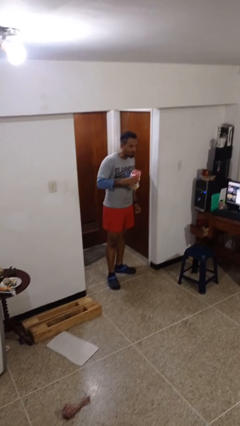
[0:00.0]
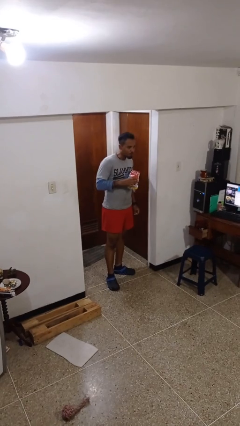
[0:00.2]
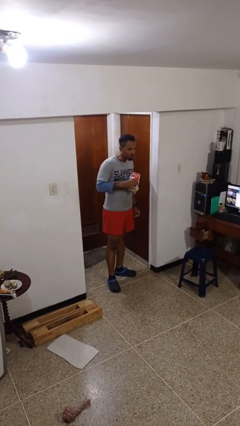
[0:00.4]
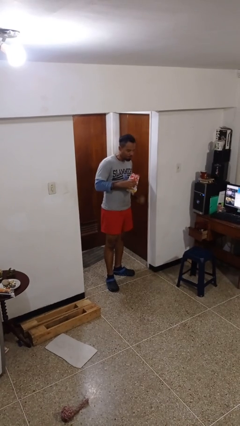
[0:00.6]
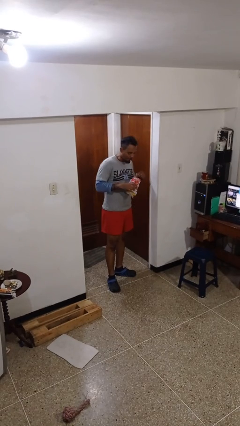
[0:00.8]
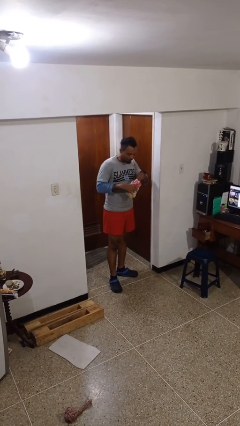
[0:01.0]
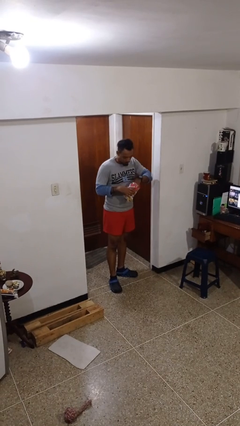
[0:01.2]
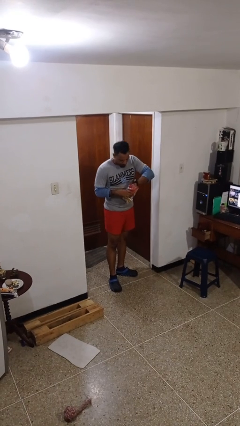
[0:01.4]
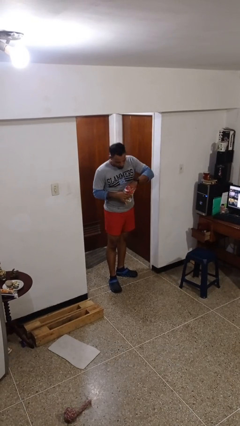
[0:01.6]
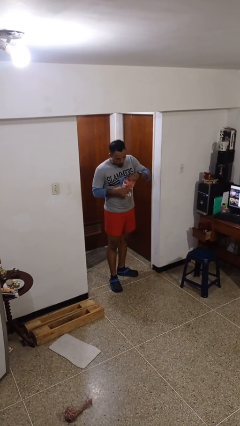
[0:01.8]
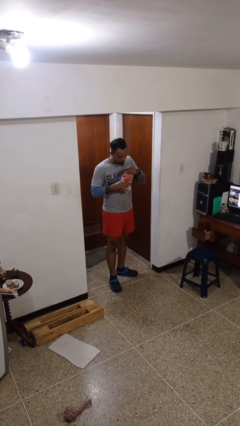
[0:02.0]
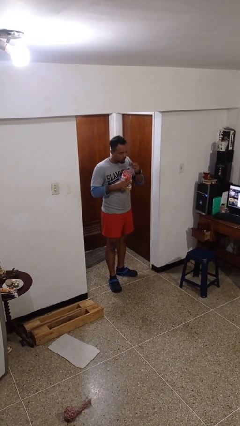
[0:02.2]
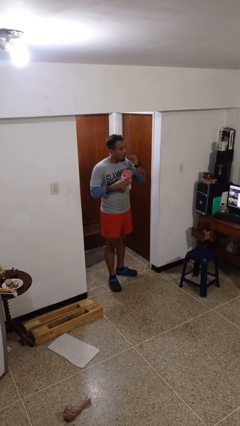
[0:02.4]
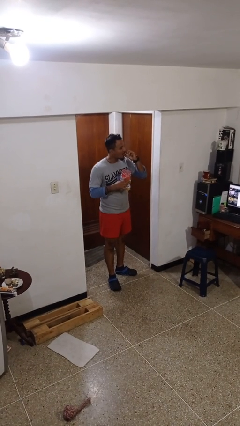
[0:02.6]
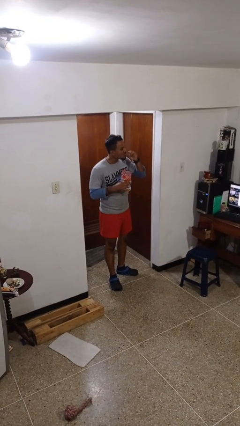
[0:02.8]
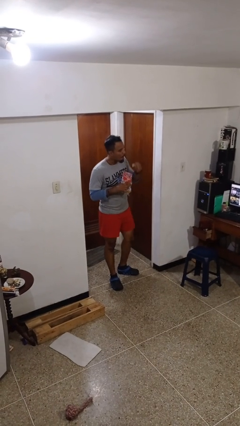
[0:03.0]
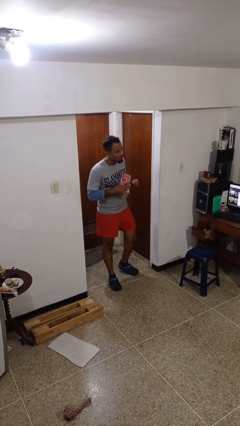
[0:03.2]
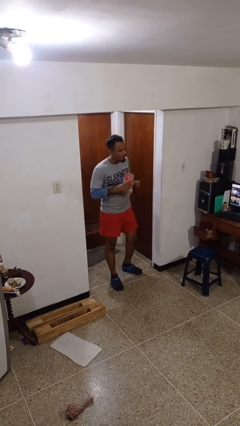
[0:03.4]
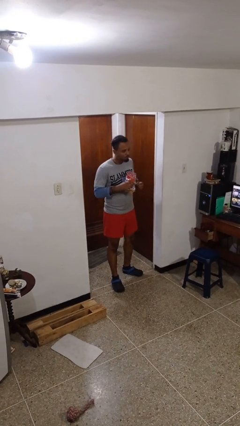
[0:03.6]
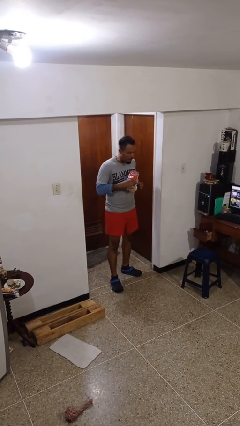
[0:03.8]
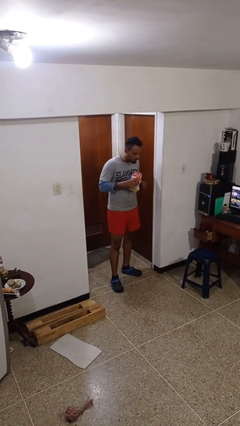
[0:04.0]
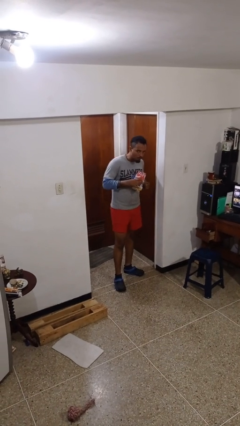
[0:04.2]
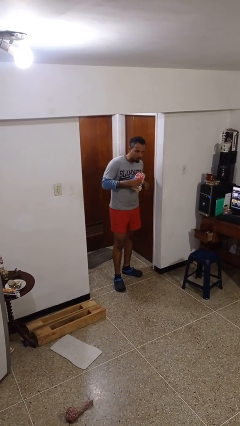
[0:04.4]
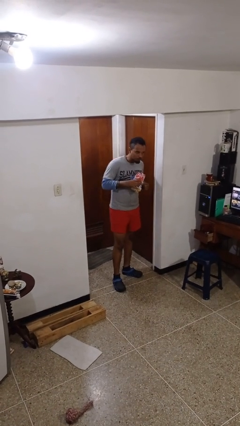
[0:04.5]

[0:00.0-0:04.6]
person eats snack from bag

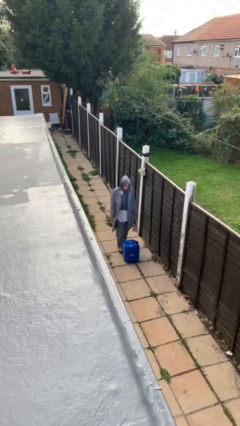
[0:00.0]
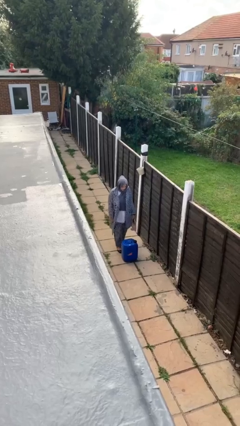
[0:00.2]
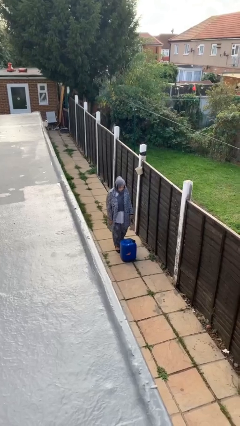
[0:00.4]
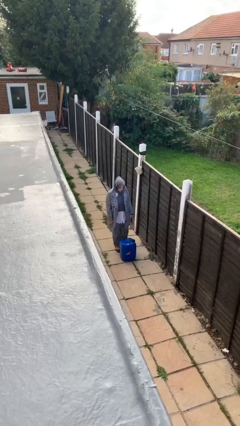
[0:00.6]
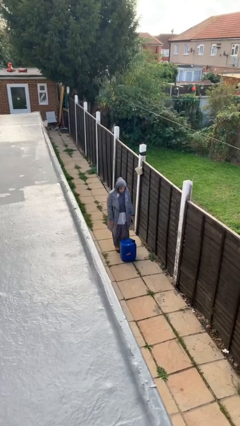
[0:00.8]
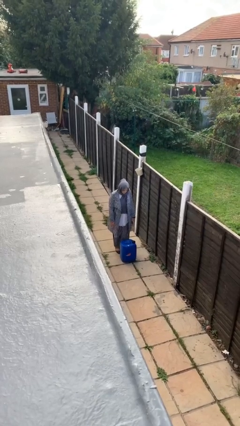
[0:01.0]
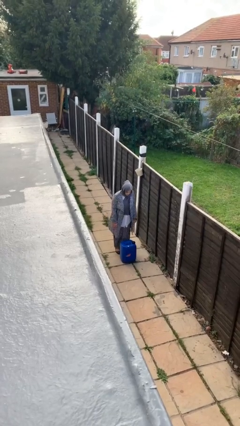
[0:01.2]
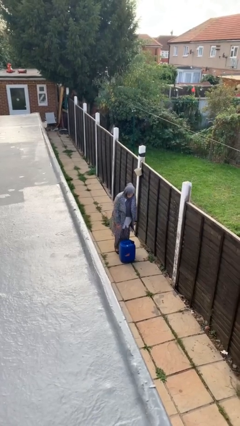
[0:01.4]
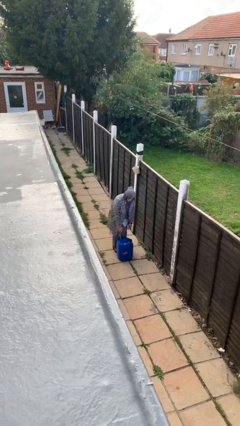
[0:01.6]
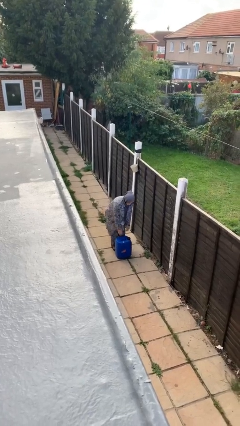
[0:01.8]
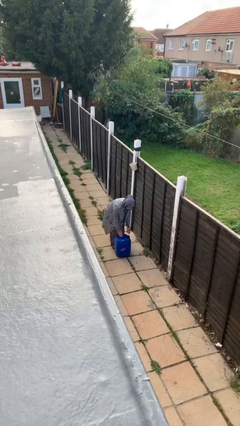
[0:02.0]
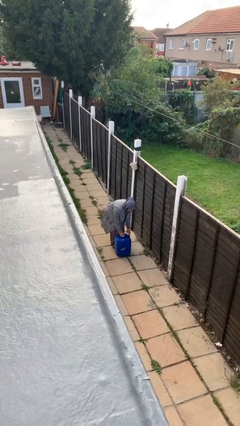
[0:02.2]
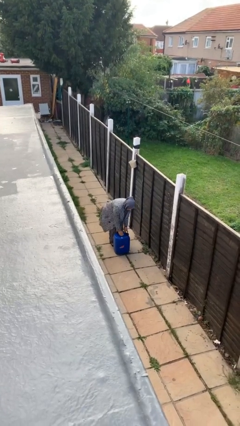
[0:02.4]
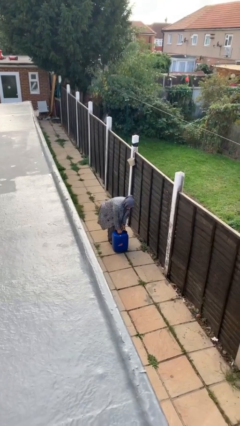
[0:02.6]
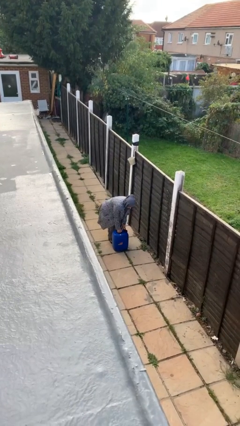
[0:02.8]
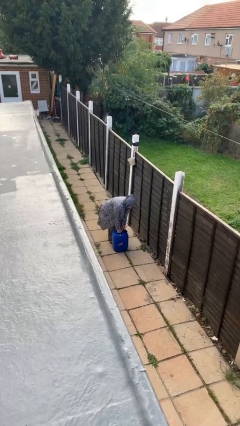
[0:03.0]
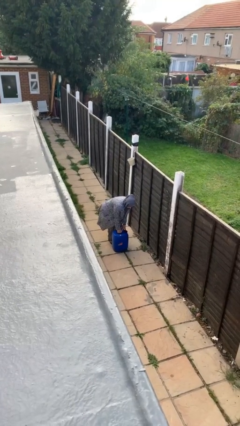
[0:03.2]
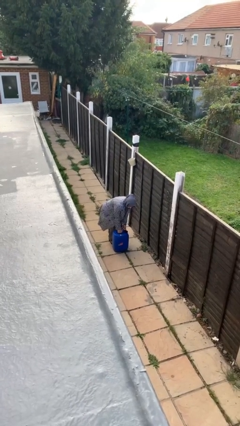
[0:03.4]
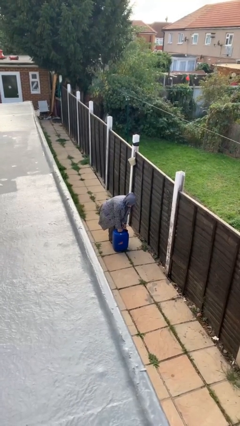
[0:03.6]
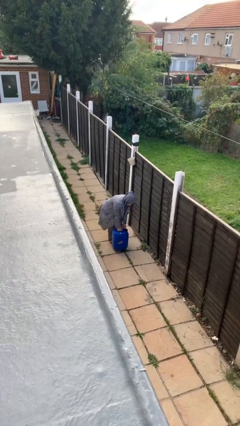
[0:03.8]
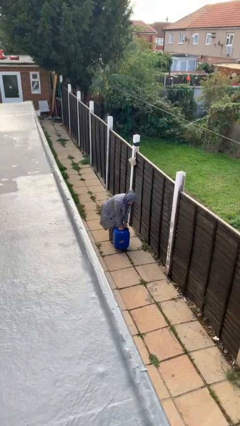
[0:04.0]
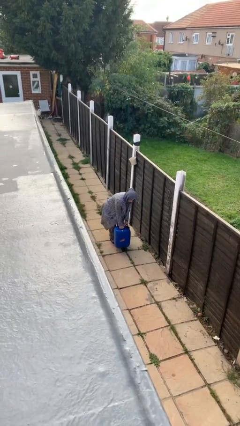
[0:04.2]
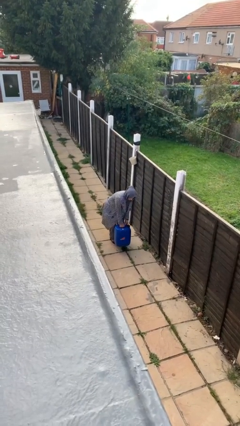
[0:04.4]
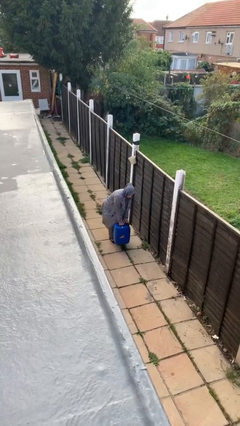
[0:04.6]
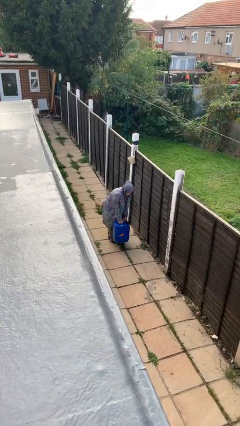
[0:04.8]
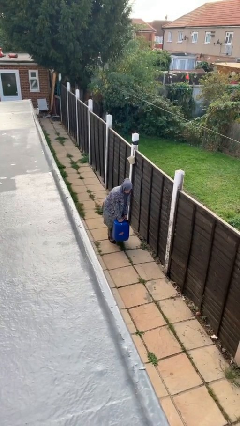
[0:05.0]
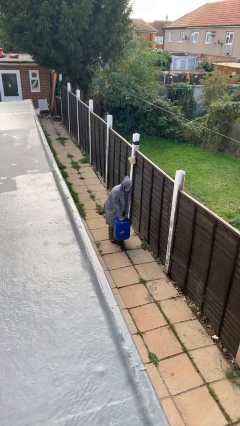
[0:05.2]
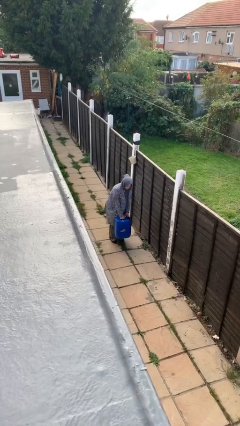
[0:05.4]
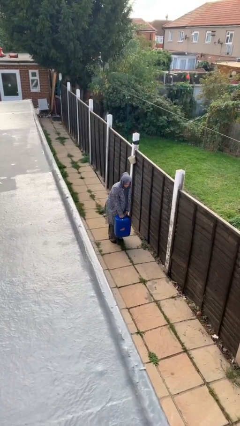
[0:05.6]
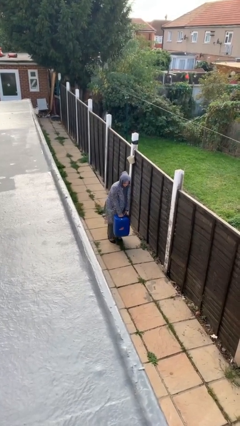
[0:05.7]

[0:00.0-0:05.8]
person picks up object from floor

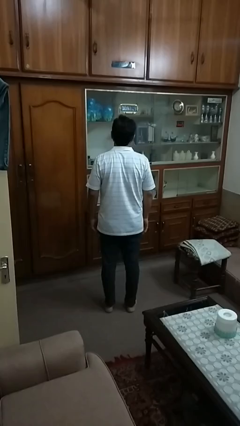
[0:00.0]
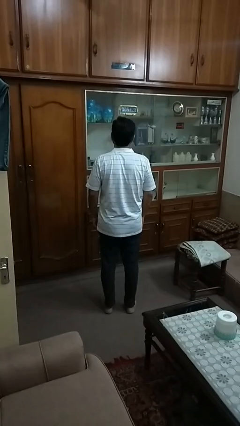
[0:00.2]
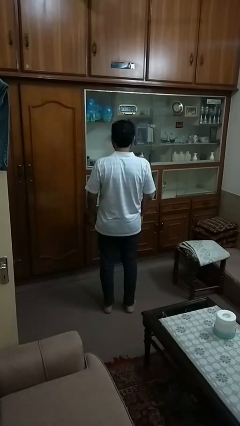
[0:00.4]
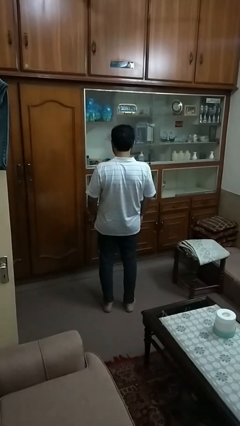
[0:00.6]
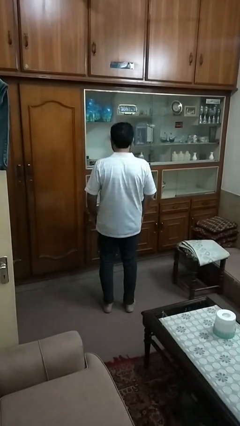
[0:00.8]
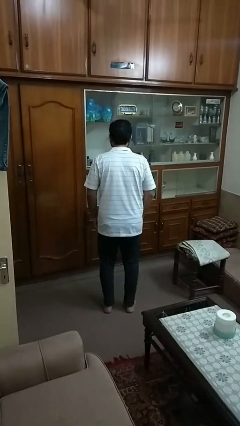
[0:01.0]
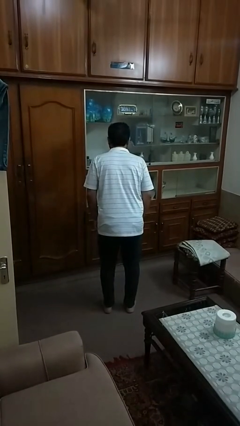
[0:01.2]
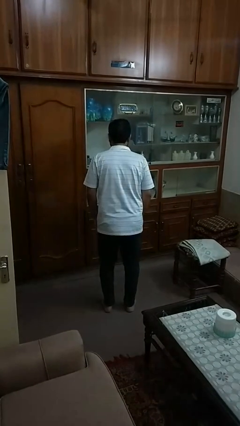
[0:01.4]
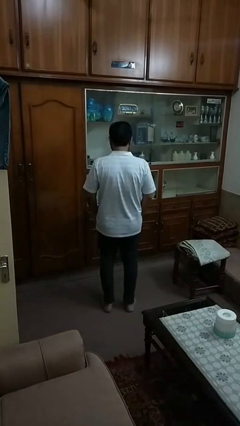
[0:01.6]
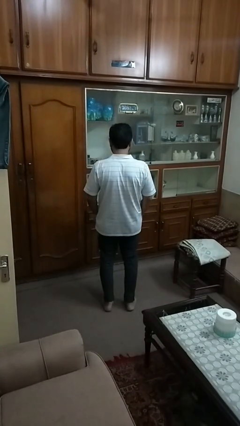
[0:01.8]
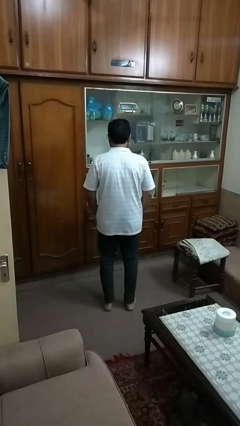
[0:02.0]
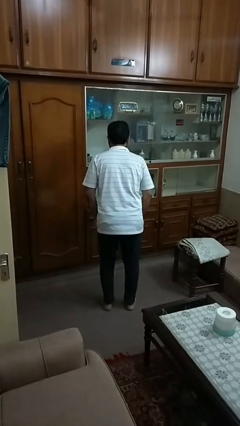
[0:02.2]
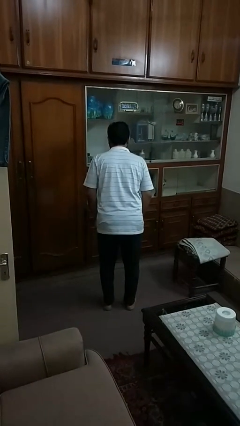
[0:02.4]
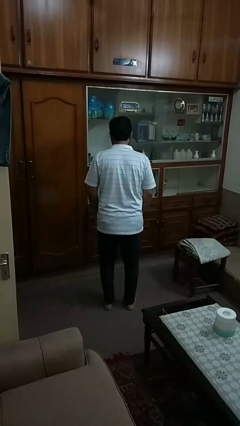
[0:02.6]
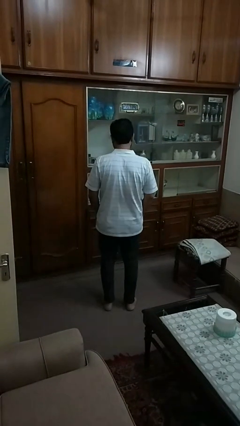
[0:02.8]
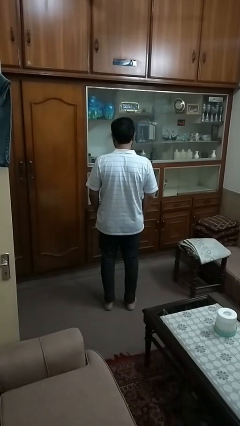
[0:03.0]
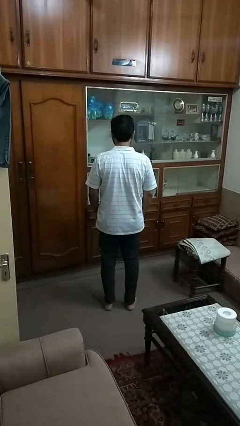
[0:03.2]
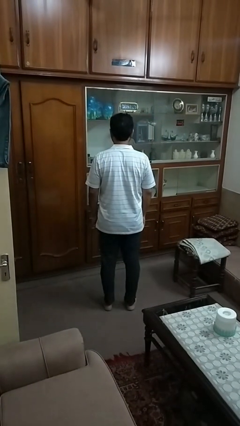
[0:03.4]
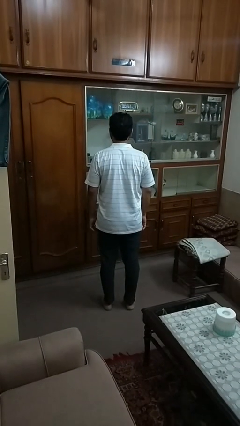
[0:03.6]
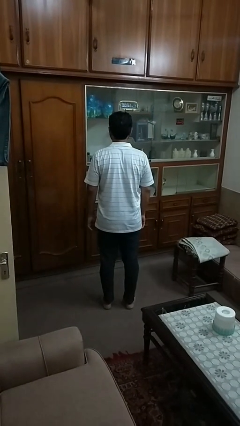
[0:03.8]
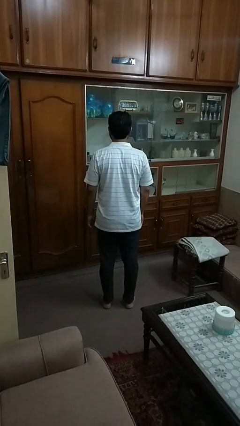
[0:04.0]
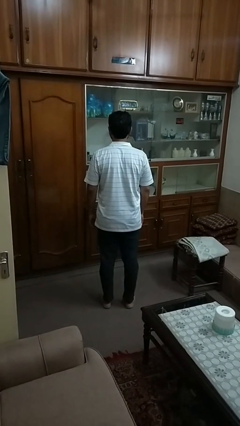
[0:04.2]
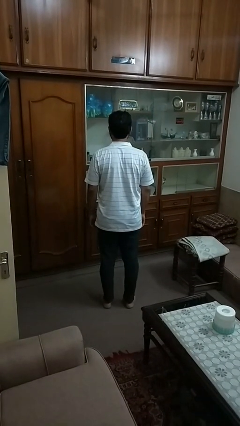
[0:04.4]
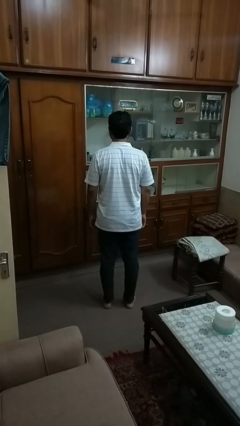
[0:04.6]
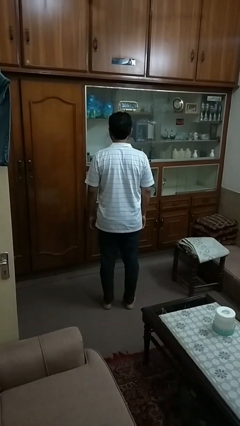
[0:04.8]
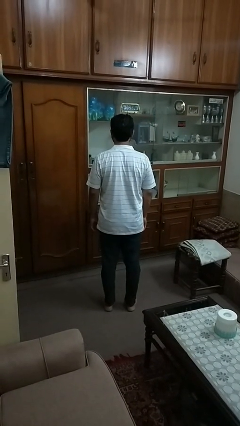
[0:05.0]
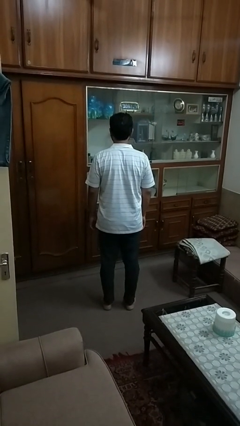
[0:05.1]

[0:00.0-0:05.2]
person wiggles hips

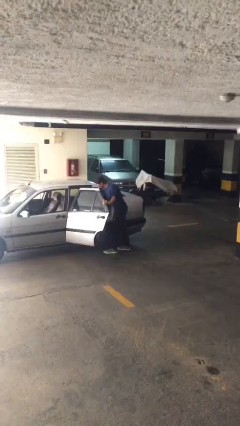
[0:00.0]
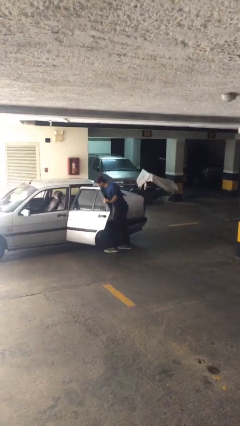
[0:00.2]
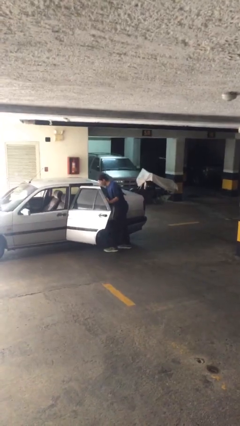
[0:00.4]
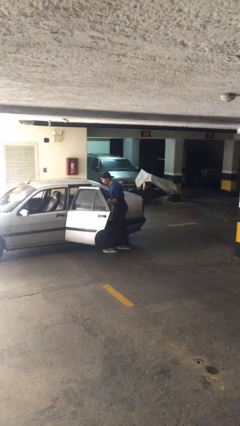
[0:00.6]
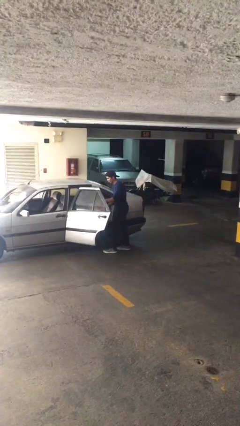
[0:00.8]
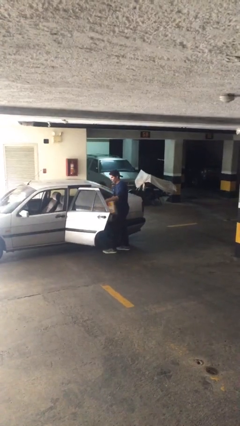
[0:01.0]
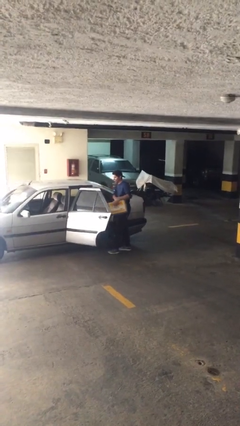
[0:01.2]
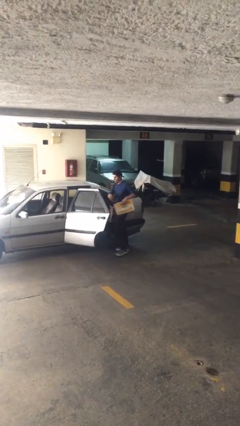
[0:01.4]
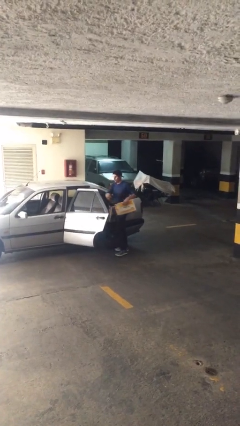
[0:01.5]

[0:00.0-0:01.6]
person unloads car

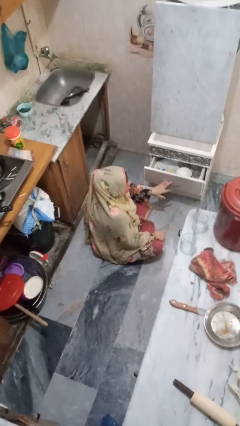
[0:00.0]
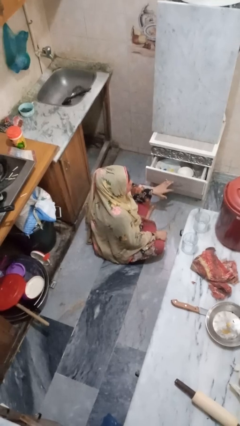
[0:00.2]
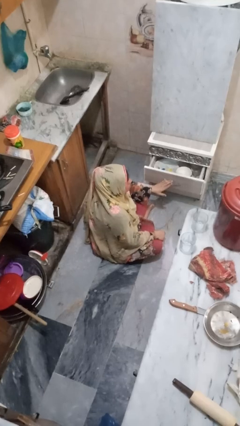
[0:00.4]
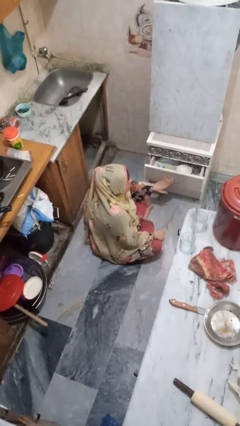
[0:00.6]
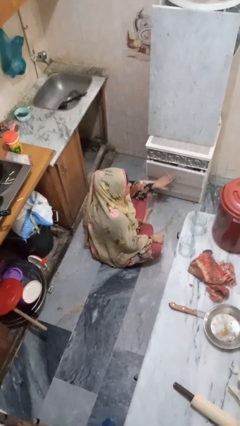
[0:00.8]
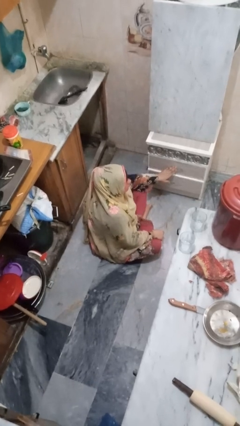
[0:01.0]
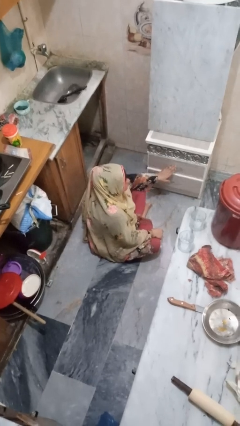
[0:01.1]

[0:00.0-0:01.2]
person closes kitchen drawer
